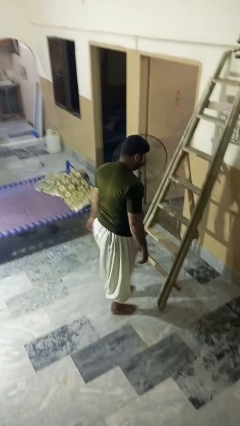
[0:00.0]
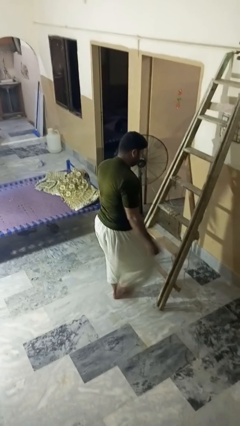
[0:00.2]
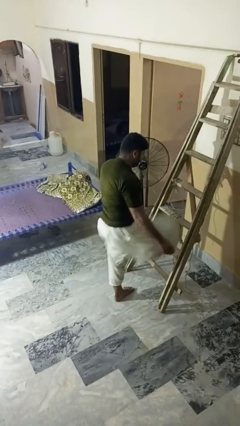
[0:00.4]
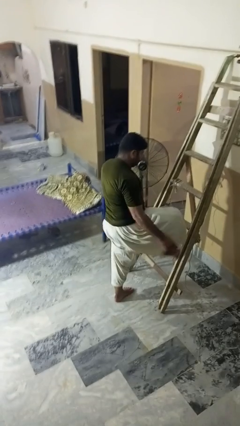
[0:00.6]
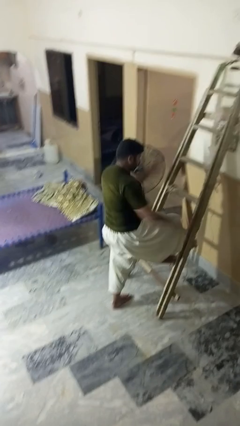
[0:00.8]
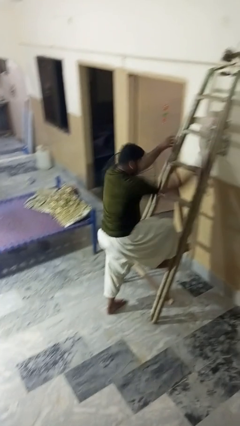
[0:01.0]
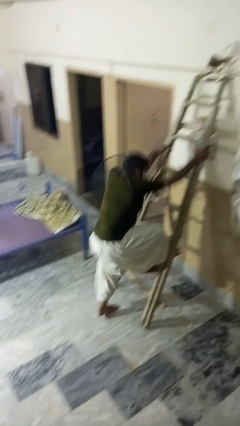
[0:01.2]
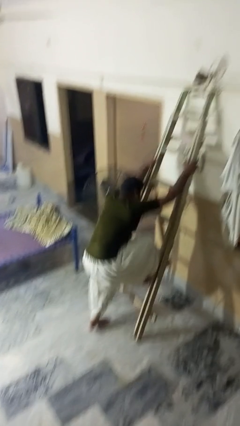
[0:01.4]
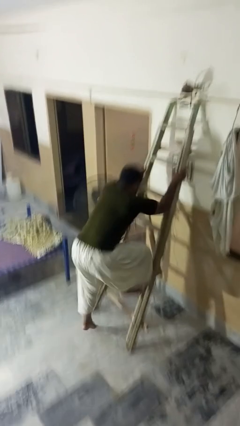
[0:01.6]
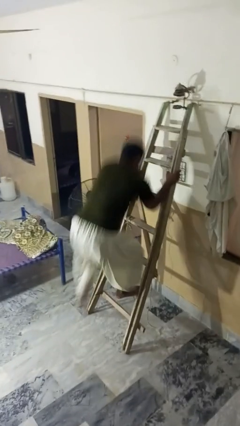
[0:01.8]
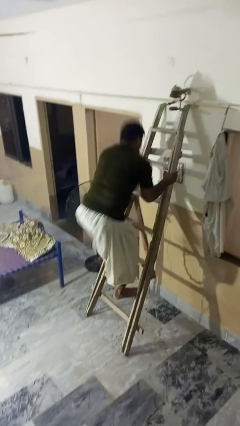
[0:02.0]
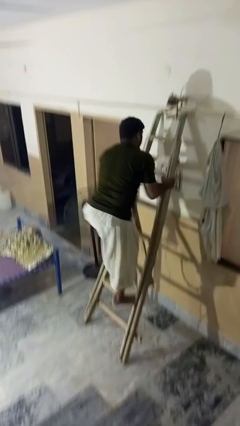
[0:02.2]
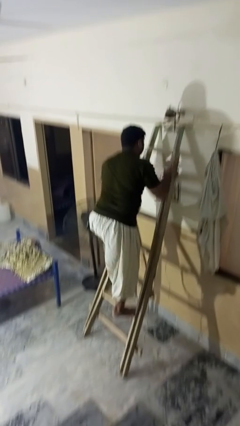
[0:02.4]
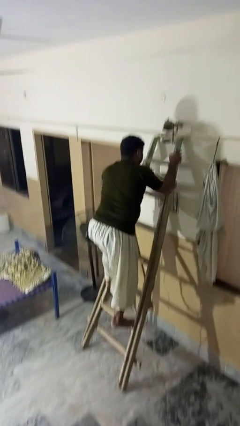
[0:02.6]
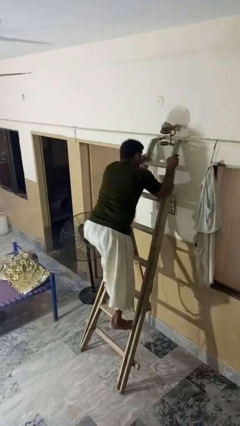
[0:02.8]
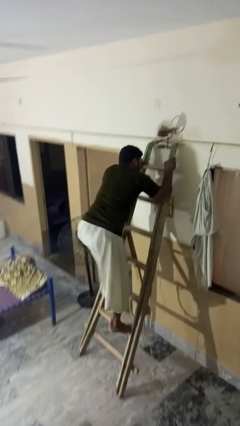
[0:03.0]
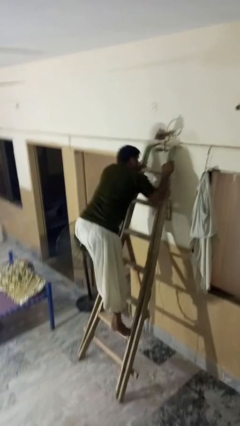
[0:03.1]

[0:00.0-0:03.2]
person climbs up ladder

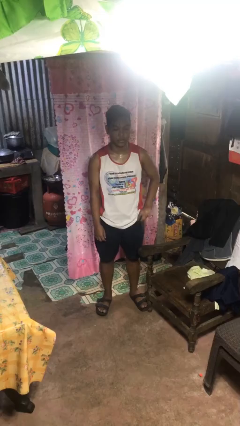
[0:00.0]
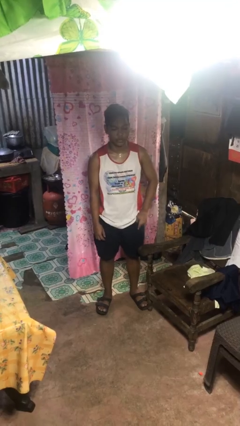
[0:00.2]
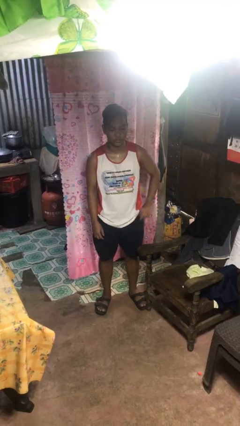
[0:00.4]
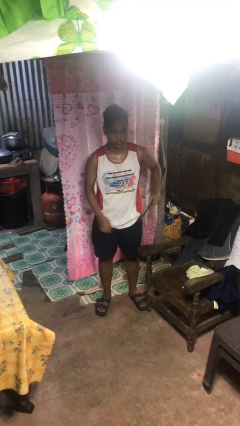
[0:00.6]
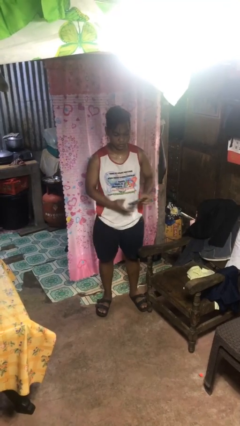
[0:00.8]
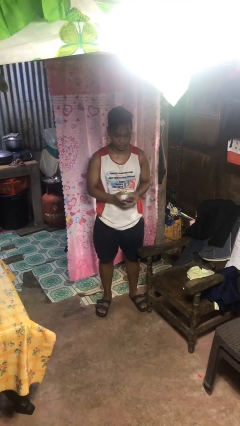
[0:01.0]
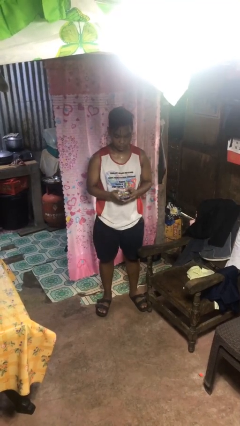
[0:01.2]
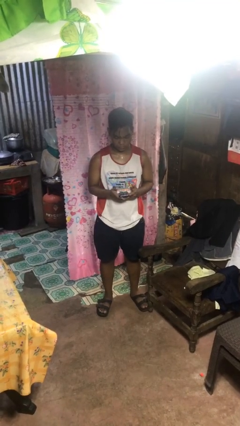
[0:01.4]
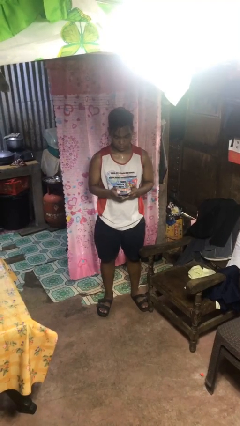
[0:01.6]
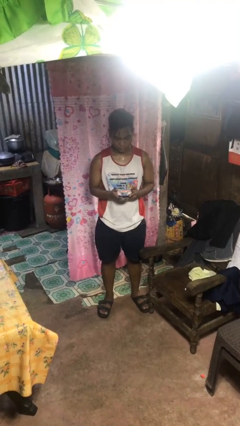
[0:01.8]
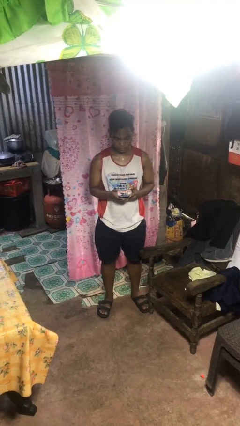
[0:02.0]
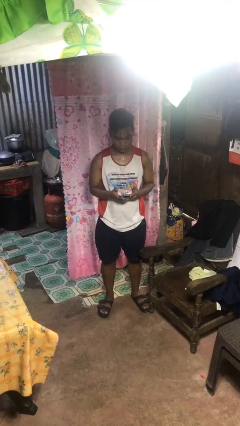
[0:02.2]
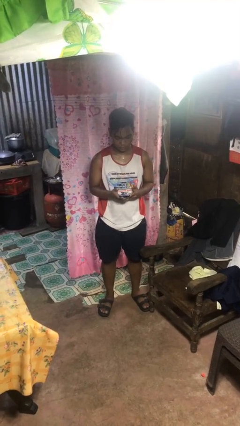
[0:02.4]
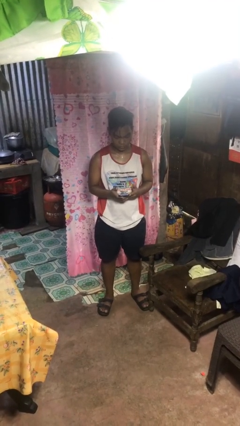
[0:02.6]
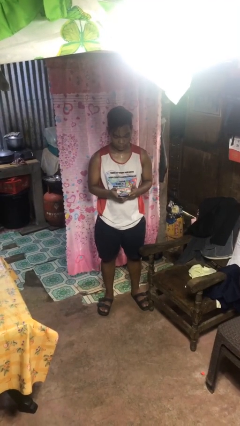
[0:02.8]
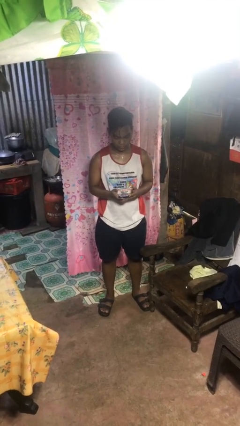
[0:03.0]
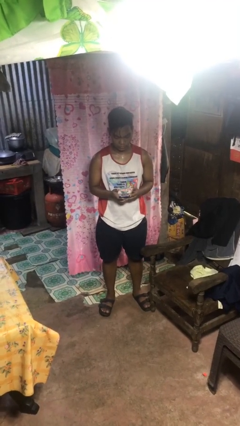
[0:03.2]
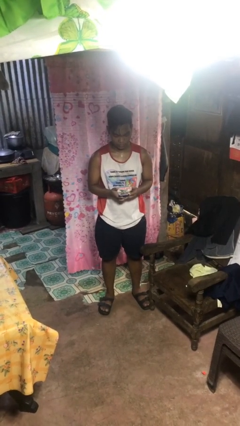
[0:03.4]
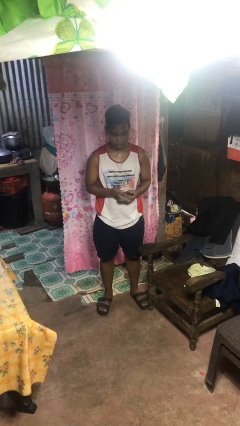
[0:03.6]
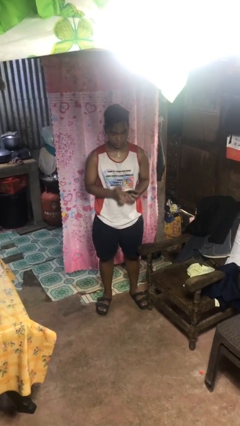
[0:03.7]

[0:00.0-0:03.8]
person takes phone from pocket

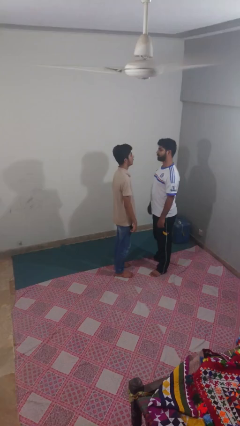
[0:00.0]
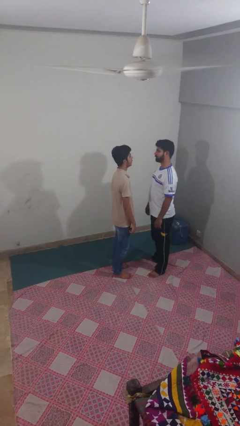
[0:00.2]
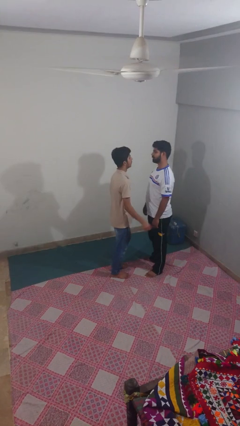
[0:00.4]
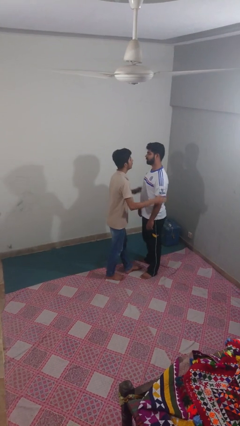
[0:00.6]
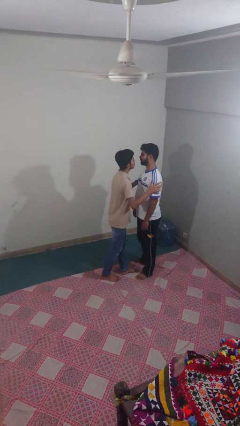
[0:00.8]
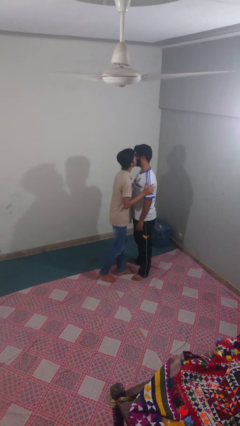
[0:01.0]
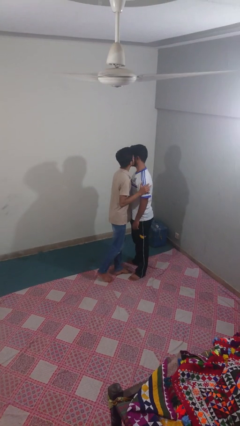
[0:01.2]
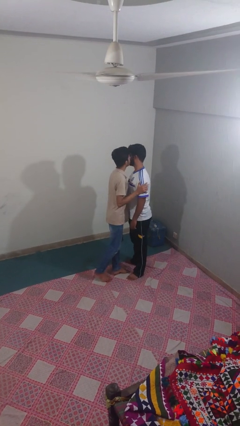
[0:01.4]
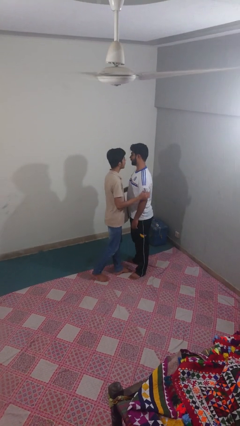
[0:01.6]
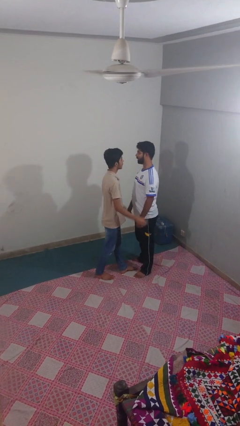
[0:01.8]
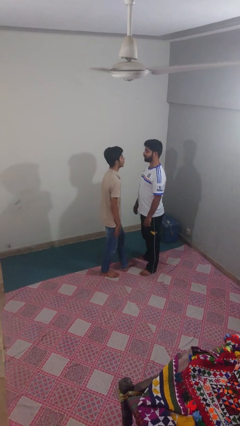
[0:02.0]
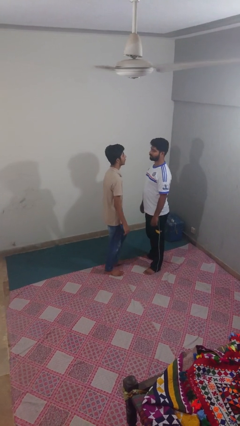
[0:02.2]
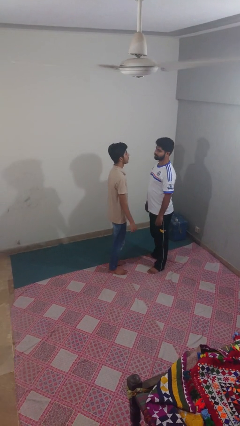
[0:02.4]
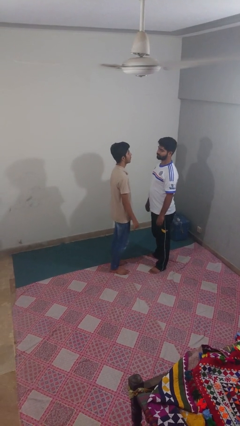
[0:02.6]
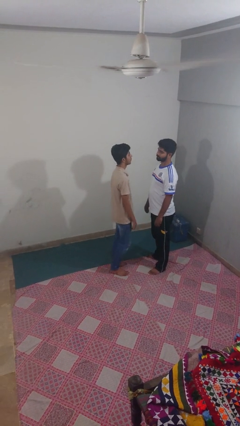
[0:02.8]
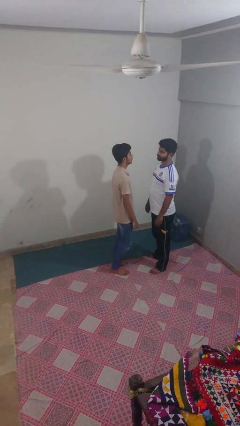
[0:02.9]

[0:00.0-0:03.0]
person kisses cheek of person

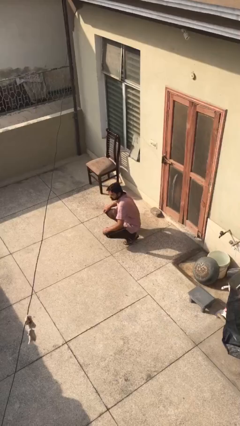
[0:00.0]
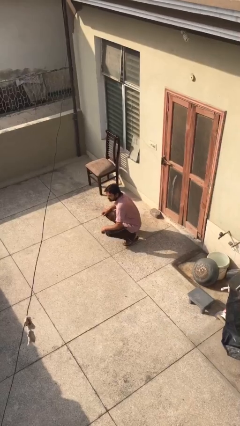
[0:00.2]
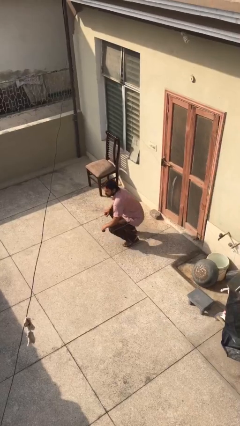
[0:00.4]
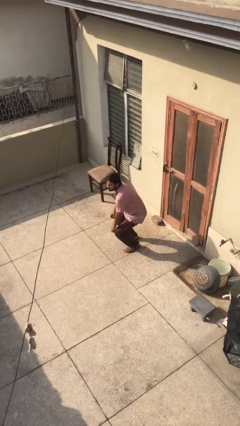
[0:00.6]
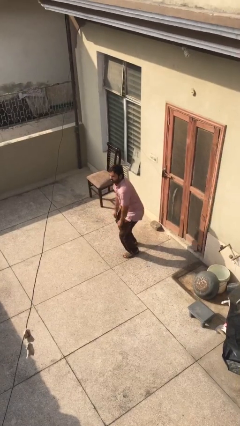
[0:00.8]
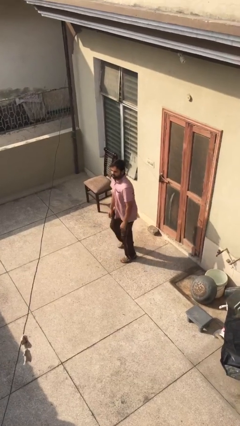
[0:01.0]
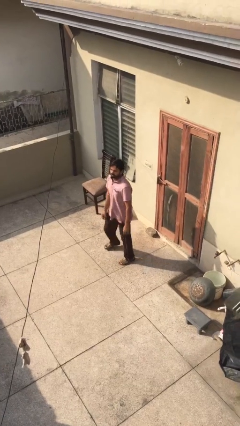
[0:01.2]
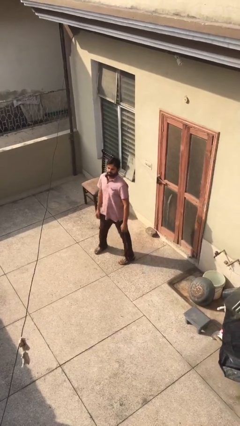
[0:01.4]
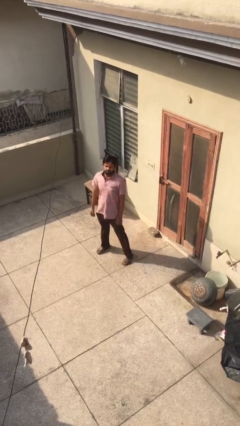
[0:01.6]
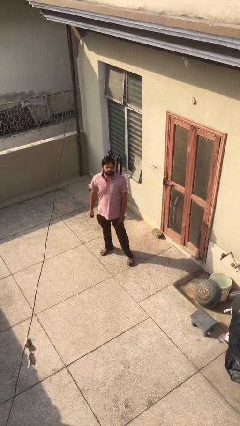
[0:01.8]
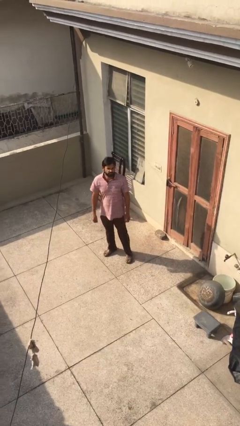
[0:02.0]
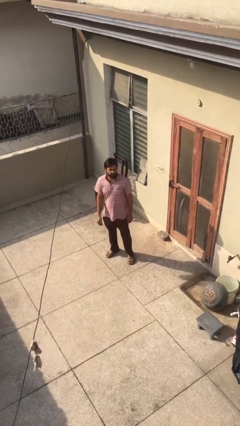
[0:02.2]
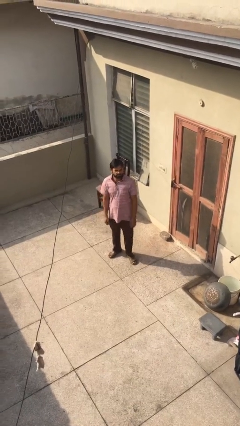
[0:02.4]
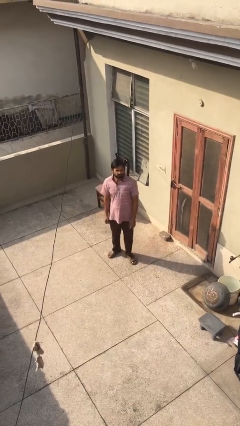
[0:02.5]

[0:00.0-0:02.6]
person stands up

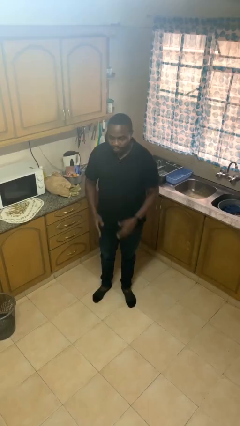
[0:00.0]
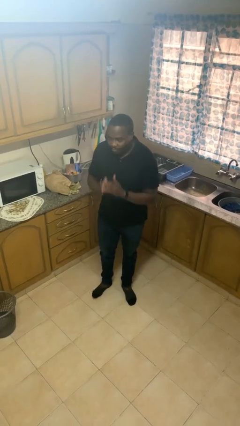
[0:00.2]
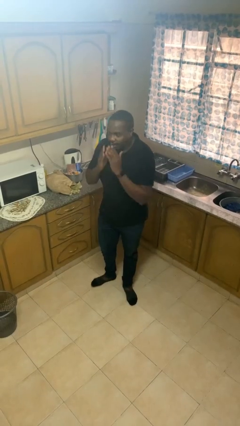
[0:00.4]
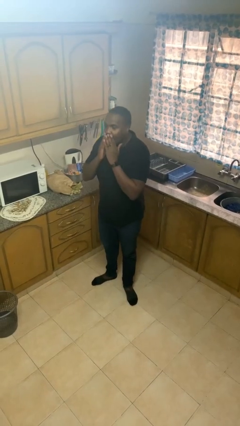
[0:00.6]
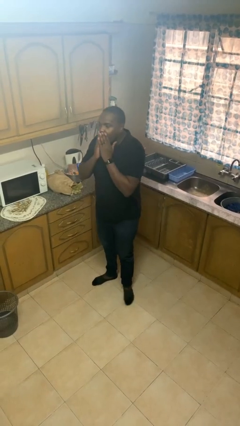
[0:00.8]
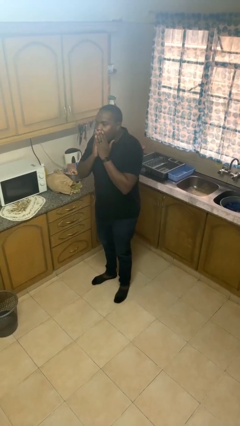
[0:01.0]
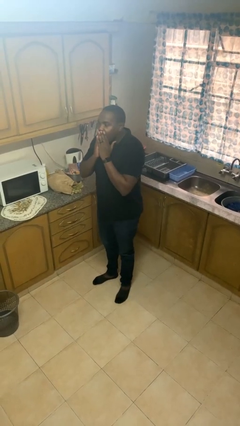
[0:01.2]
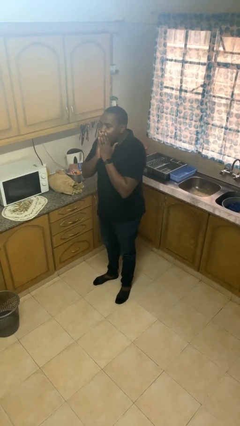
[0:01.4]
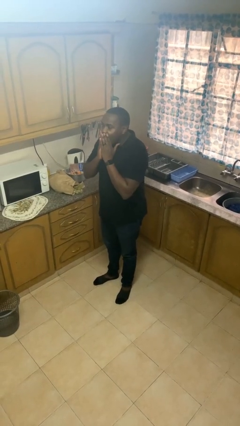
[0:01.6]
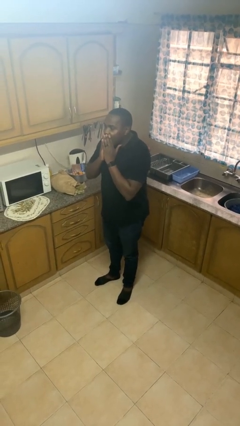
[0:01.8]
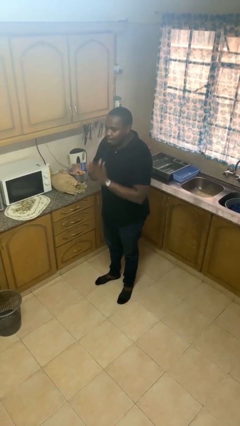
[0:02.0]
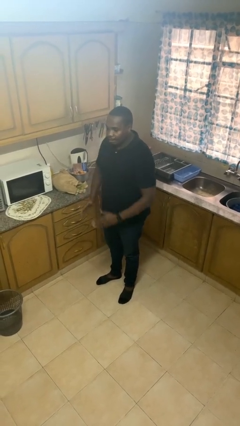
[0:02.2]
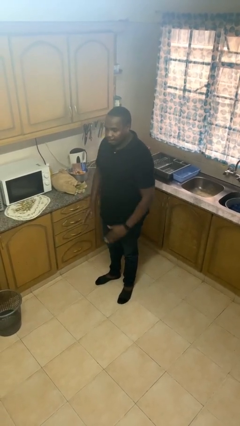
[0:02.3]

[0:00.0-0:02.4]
person yawns

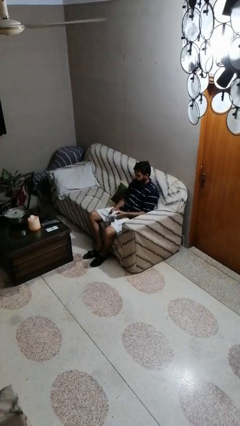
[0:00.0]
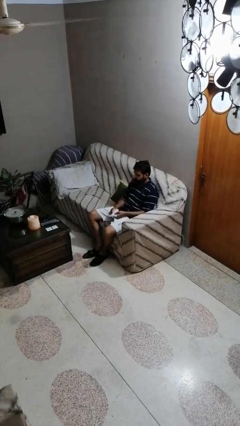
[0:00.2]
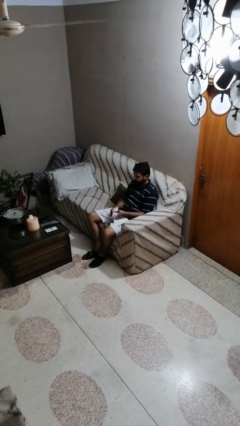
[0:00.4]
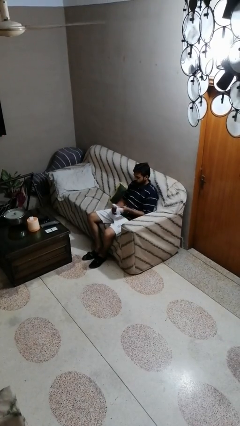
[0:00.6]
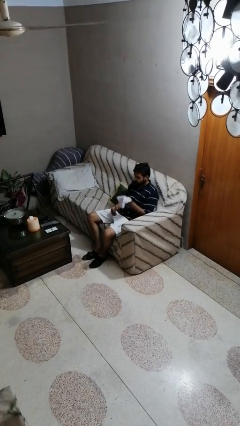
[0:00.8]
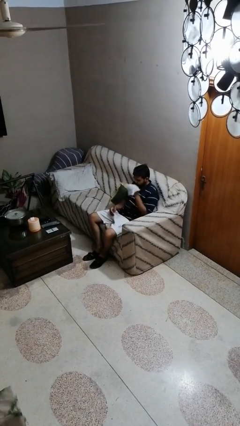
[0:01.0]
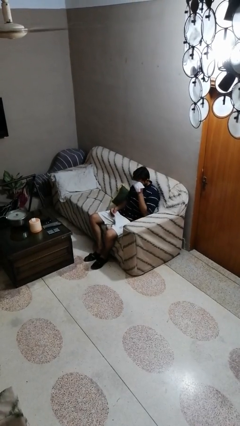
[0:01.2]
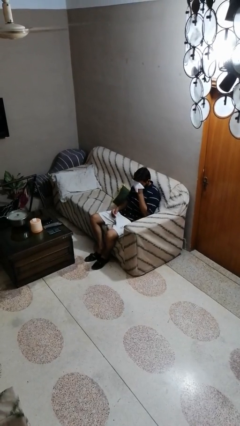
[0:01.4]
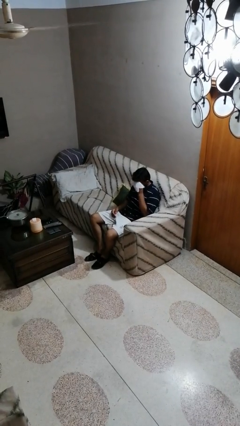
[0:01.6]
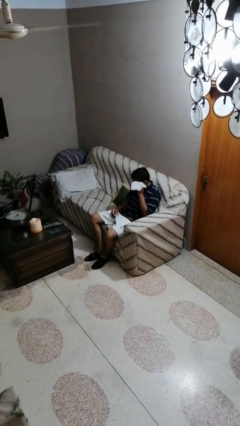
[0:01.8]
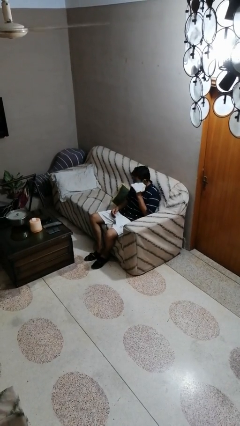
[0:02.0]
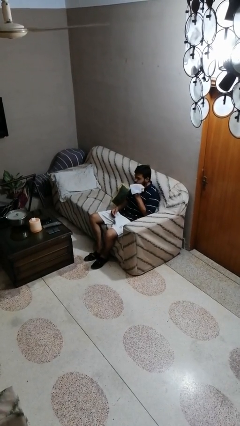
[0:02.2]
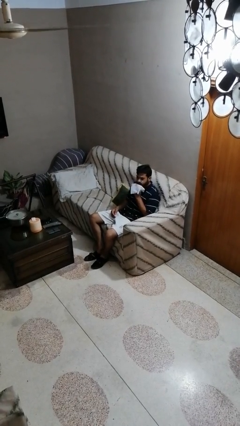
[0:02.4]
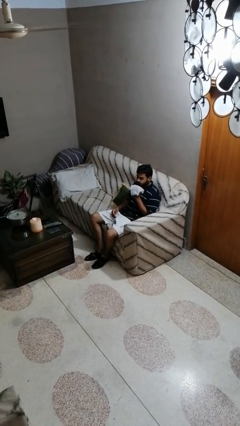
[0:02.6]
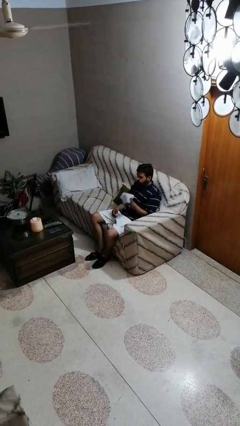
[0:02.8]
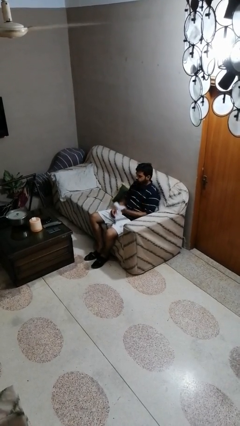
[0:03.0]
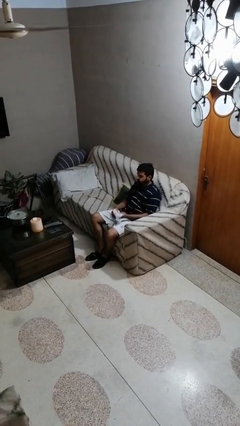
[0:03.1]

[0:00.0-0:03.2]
person wipes mouth with napkin
